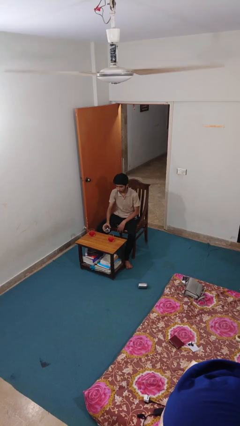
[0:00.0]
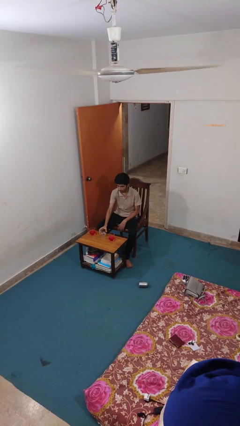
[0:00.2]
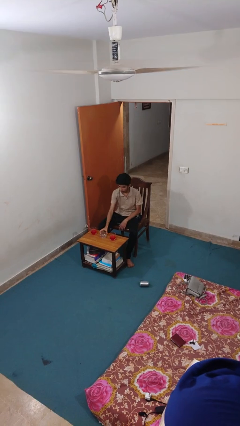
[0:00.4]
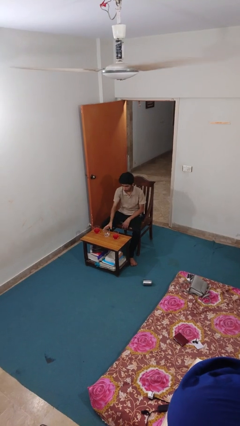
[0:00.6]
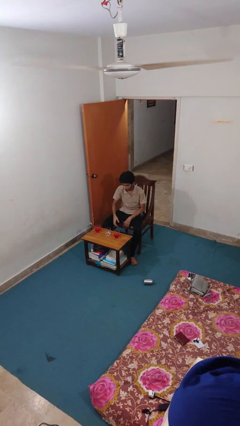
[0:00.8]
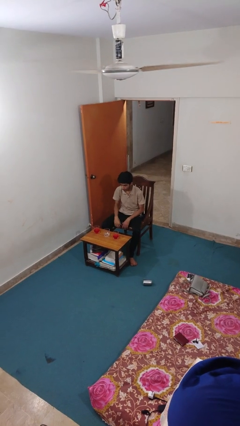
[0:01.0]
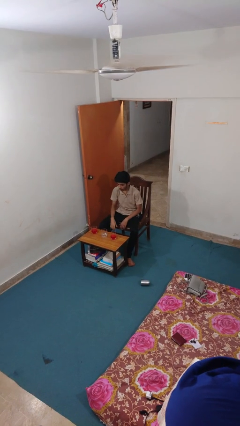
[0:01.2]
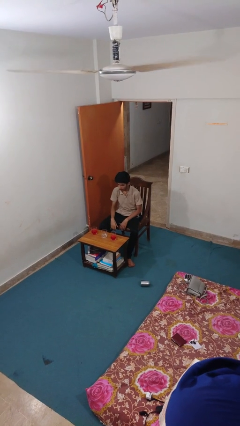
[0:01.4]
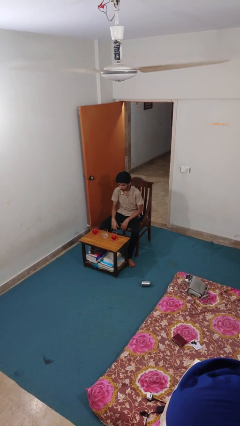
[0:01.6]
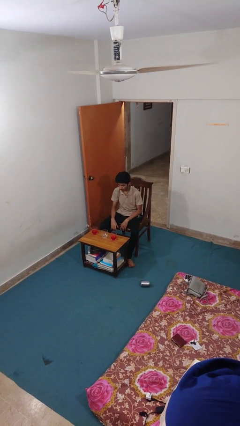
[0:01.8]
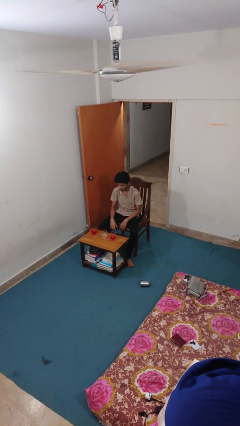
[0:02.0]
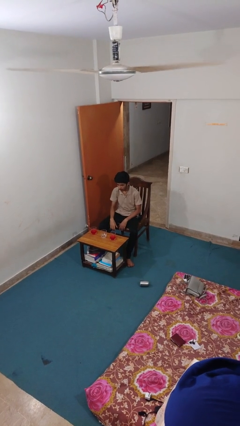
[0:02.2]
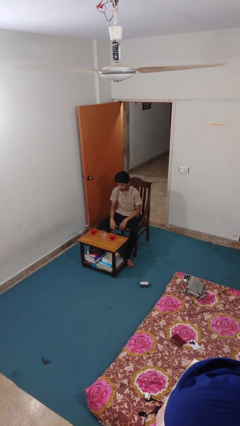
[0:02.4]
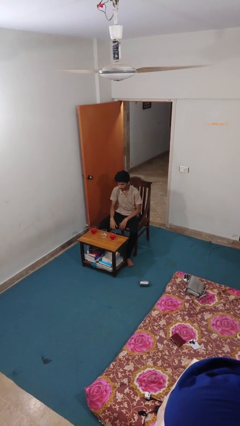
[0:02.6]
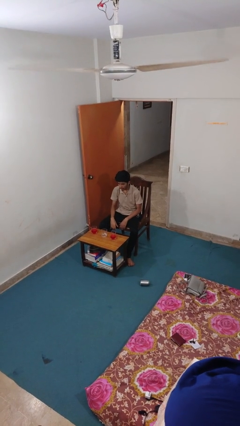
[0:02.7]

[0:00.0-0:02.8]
person puts down object on table

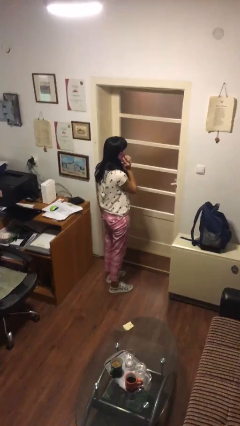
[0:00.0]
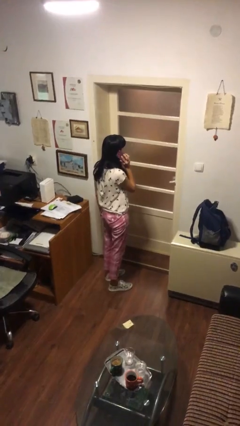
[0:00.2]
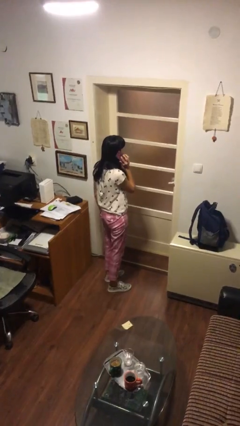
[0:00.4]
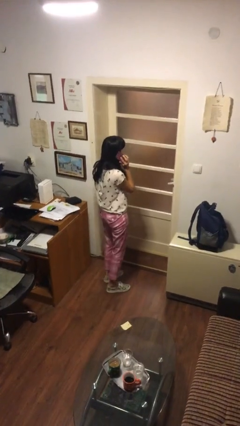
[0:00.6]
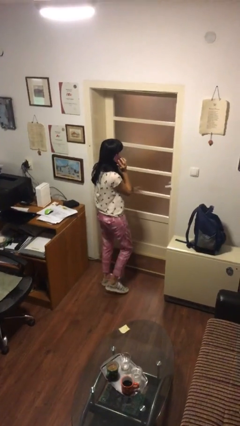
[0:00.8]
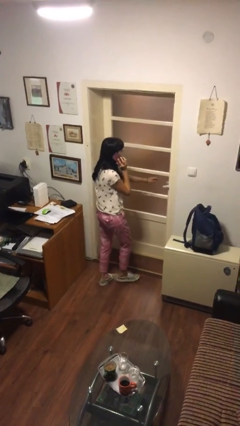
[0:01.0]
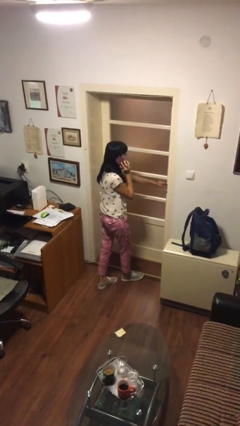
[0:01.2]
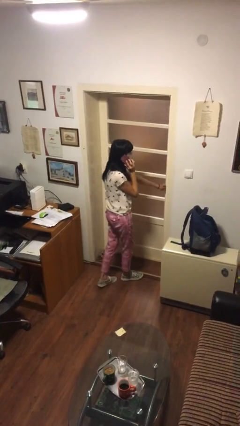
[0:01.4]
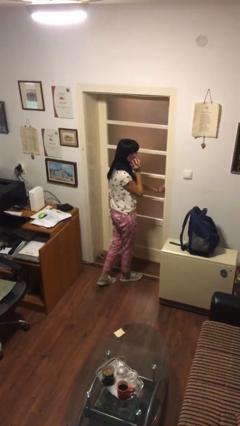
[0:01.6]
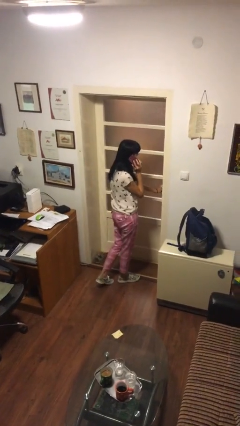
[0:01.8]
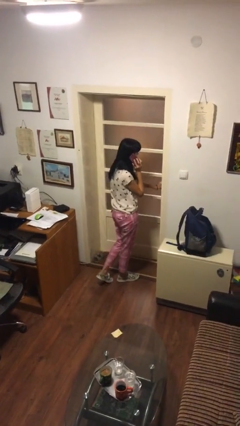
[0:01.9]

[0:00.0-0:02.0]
person opens facility door

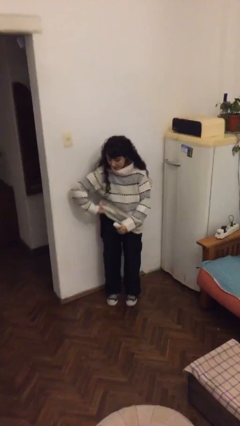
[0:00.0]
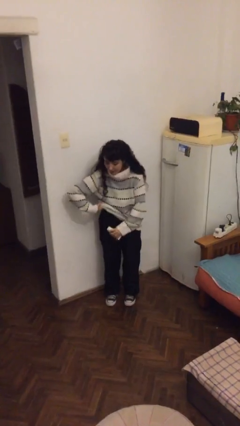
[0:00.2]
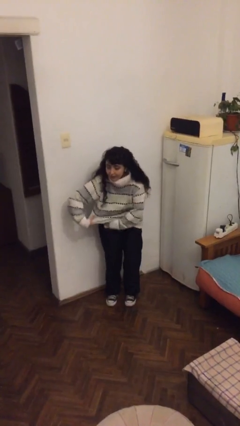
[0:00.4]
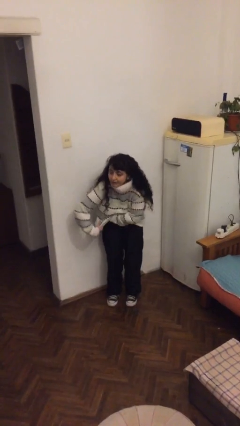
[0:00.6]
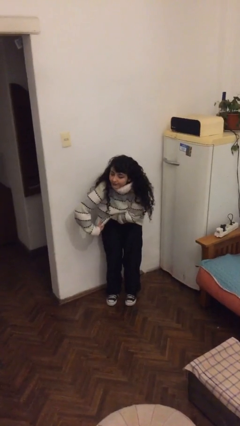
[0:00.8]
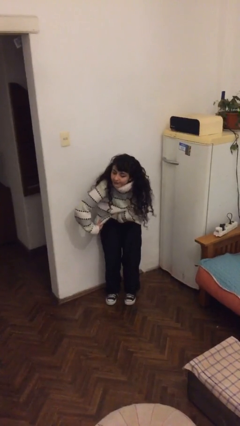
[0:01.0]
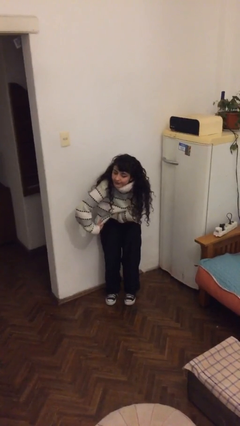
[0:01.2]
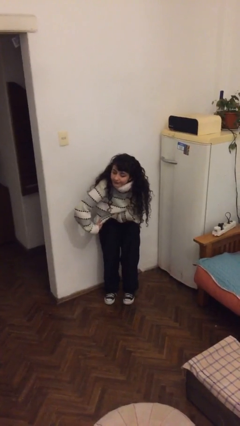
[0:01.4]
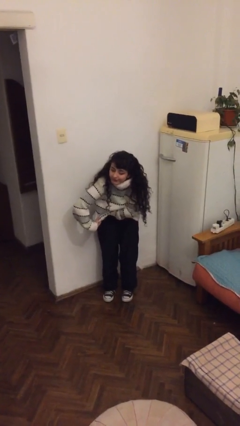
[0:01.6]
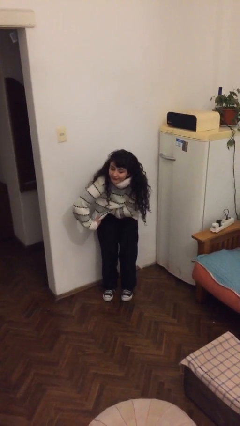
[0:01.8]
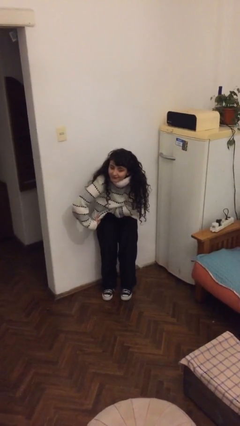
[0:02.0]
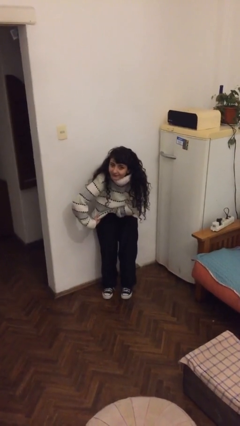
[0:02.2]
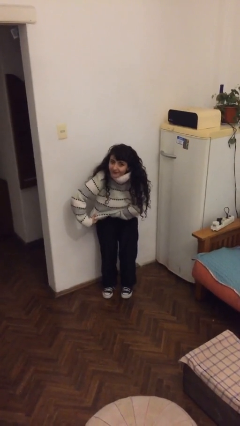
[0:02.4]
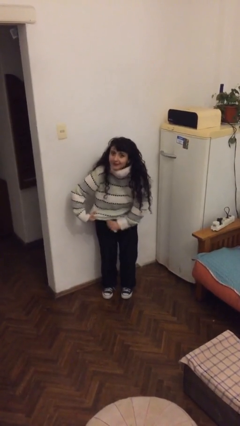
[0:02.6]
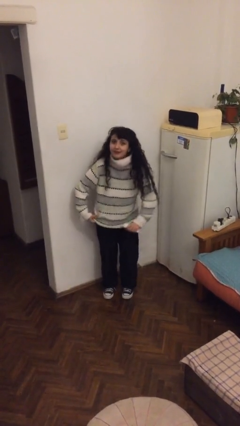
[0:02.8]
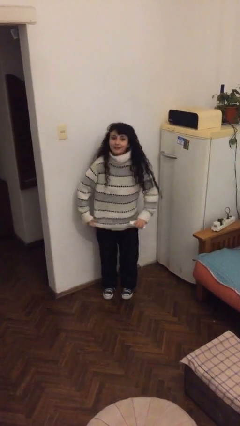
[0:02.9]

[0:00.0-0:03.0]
person applies deodorant

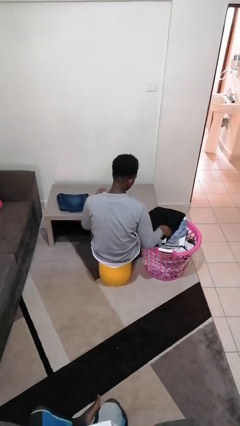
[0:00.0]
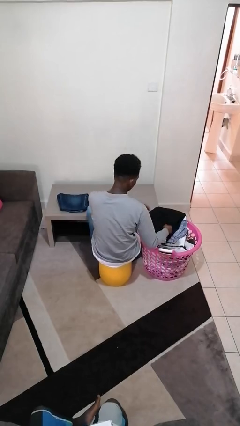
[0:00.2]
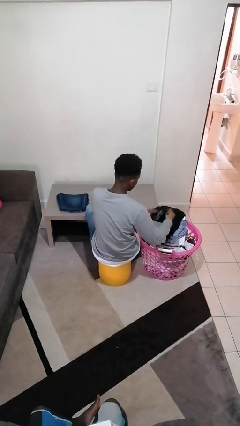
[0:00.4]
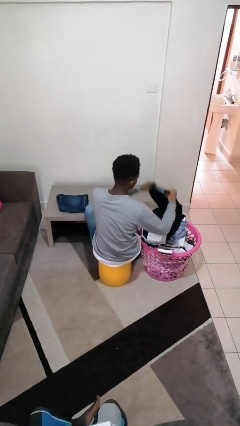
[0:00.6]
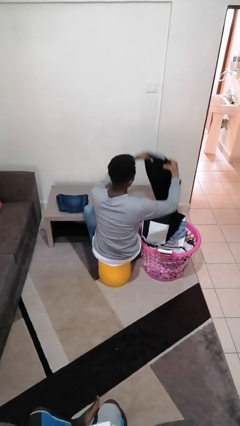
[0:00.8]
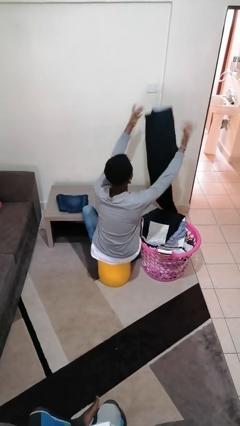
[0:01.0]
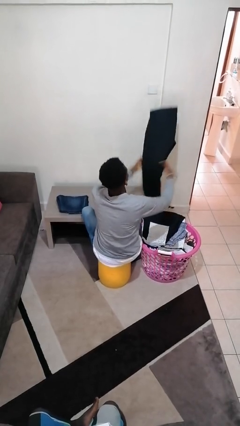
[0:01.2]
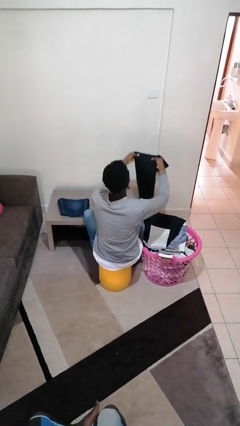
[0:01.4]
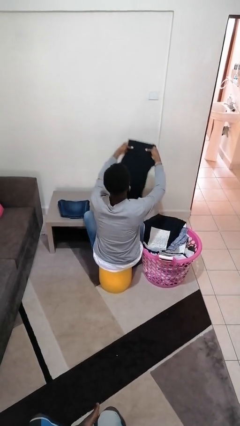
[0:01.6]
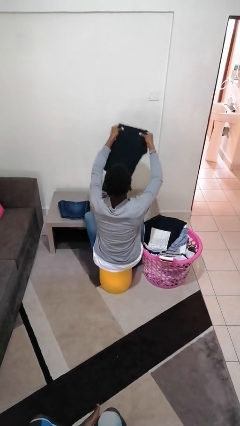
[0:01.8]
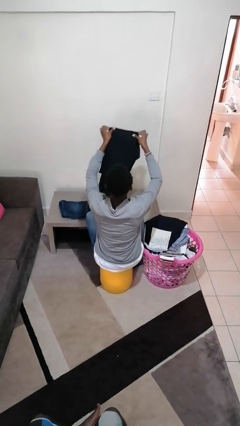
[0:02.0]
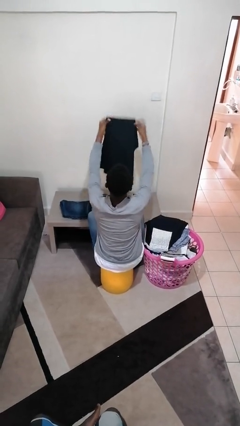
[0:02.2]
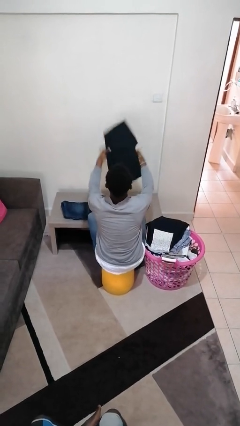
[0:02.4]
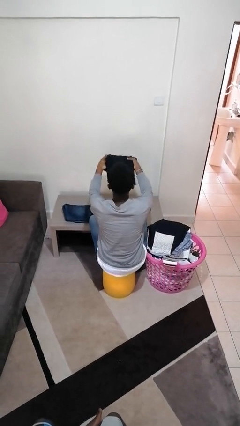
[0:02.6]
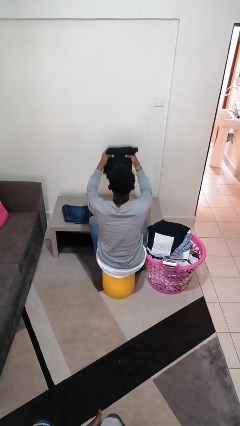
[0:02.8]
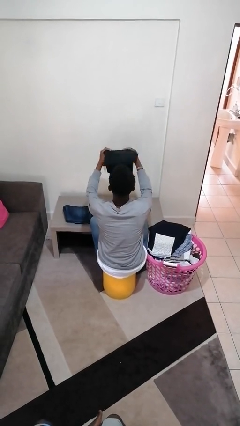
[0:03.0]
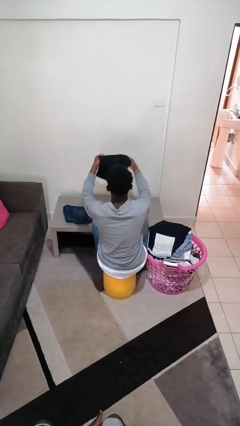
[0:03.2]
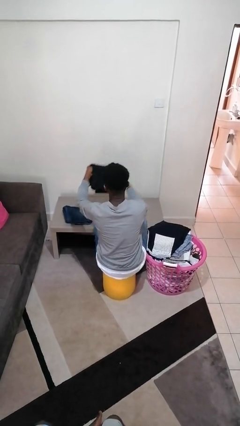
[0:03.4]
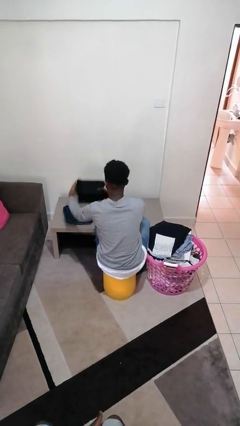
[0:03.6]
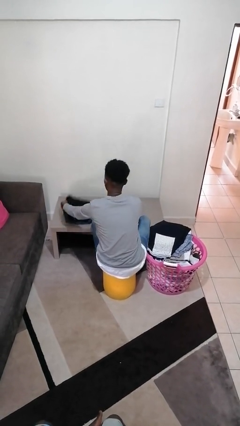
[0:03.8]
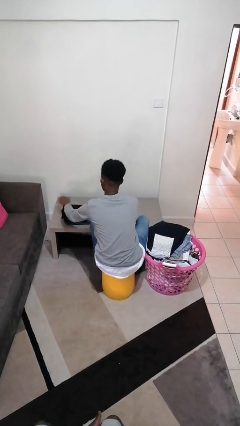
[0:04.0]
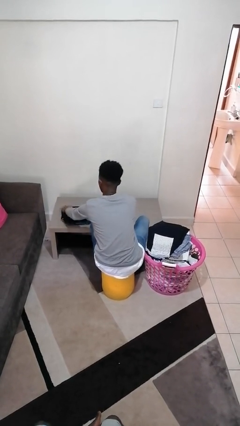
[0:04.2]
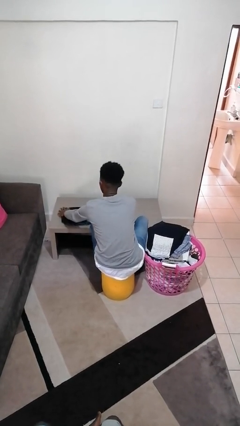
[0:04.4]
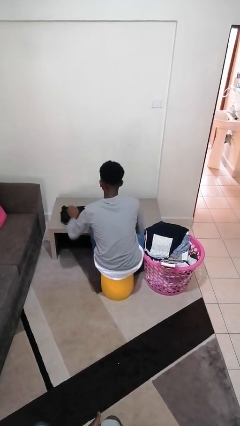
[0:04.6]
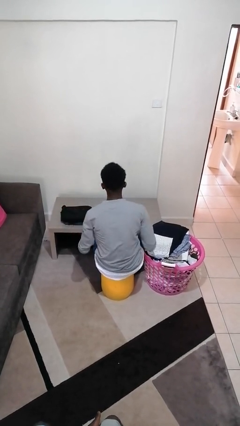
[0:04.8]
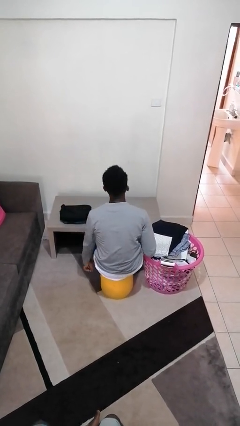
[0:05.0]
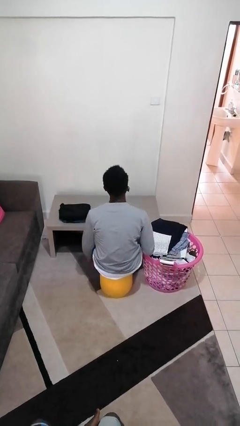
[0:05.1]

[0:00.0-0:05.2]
person folds pants

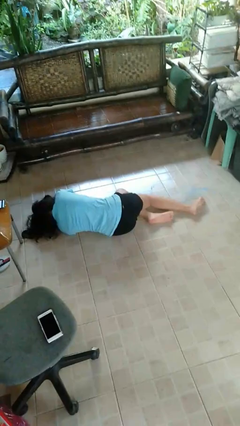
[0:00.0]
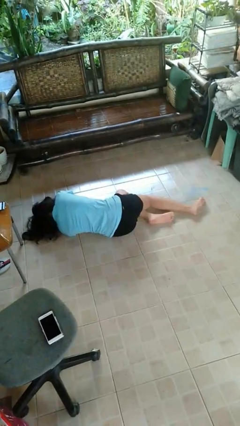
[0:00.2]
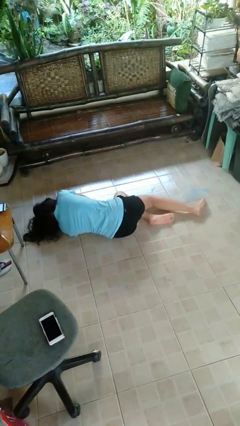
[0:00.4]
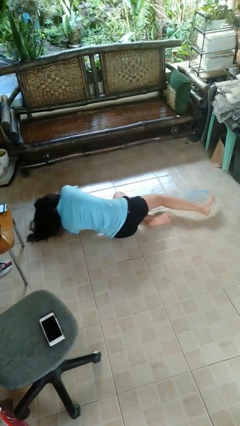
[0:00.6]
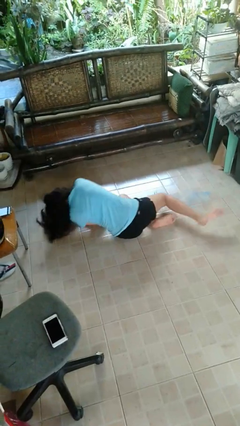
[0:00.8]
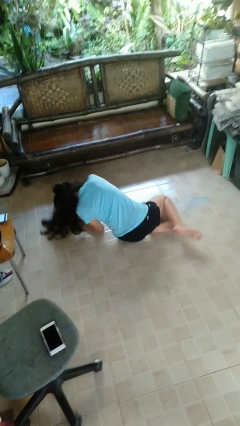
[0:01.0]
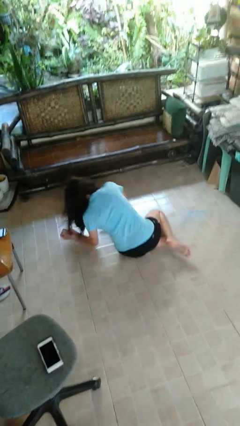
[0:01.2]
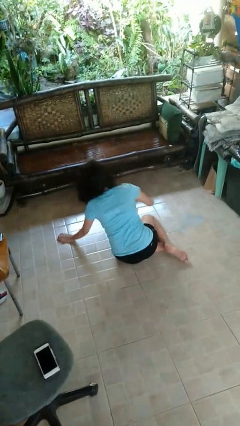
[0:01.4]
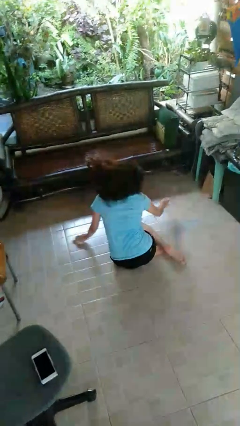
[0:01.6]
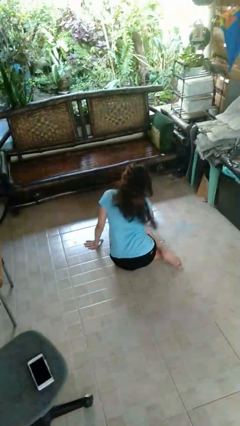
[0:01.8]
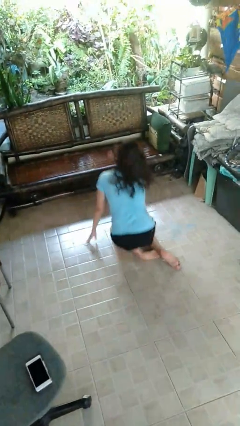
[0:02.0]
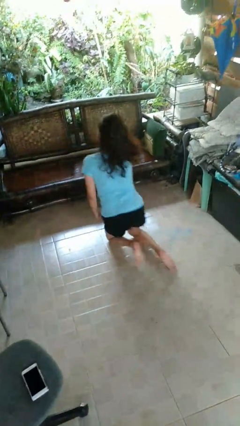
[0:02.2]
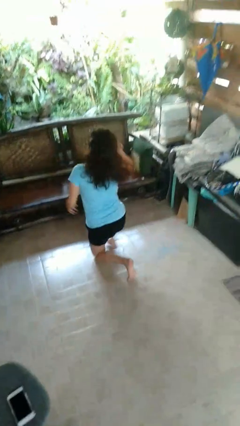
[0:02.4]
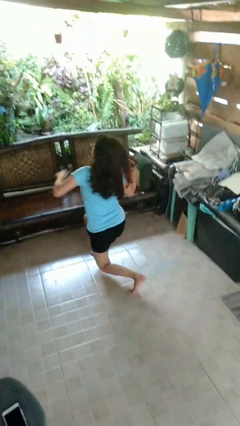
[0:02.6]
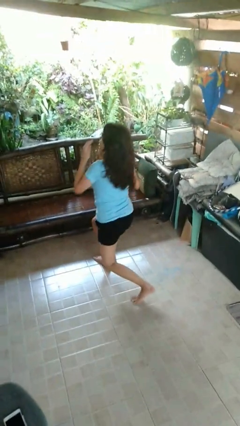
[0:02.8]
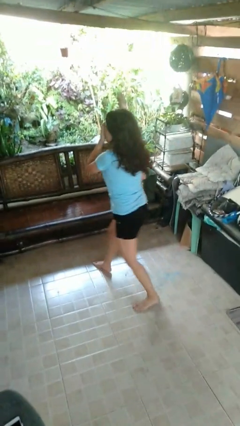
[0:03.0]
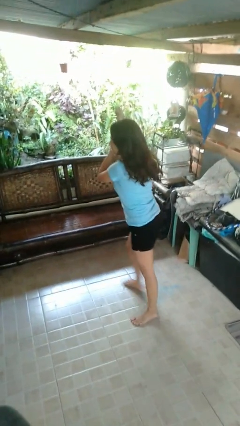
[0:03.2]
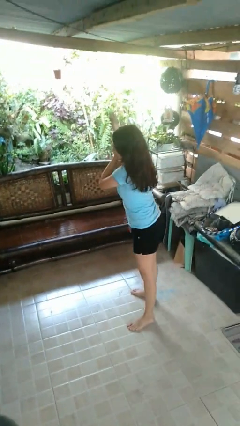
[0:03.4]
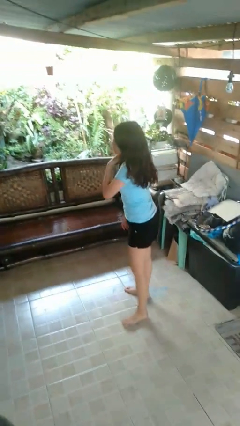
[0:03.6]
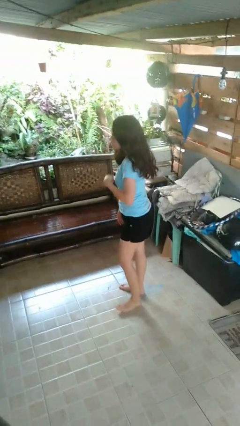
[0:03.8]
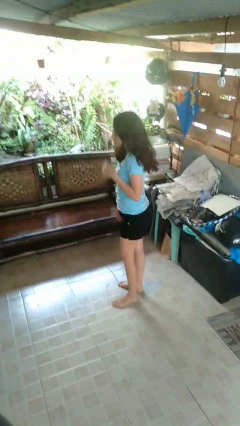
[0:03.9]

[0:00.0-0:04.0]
person stands up from floor

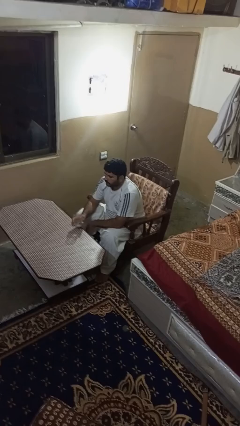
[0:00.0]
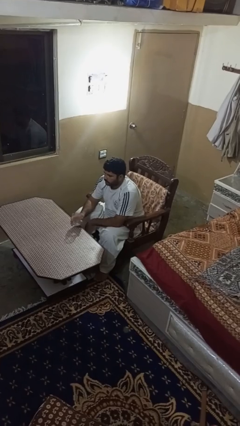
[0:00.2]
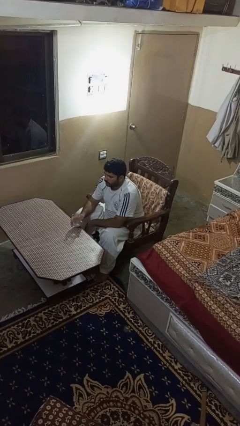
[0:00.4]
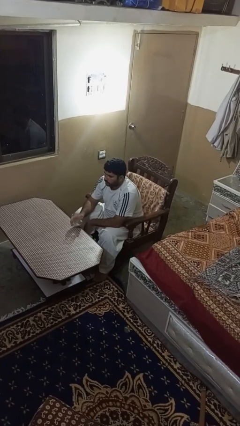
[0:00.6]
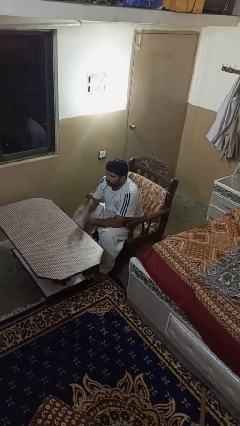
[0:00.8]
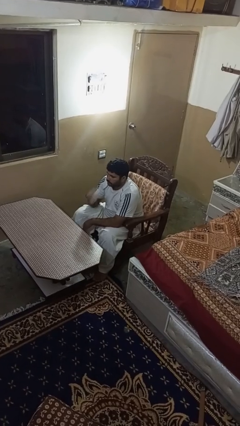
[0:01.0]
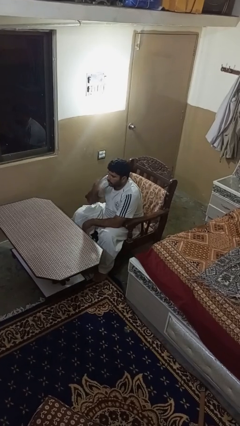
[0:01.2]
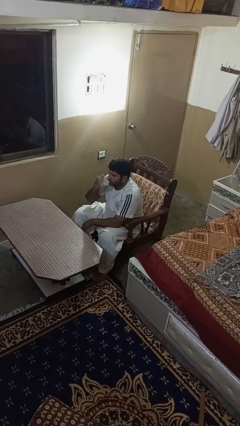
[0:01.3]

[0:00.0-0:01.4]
person drinks from shotglass
